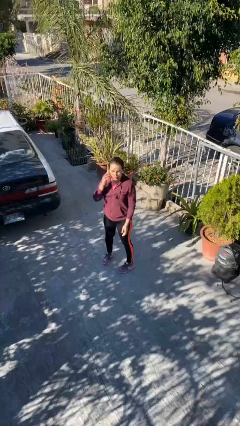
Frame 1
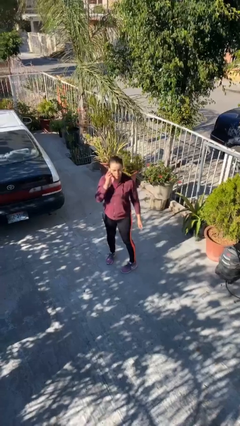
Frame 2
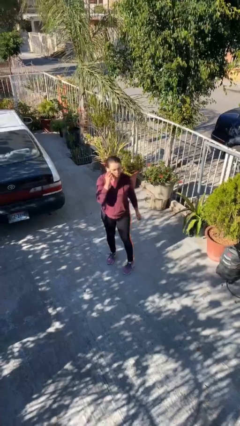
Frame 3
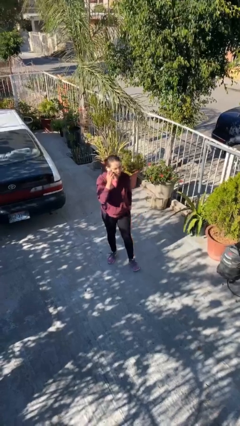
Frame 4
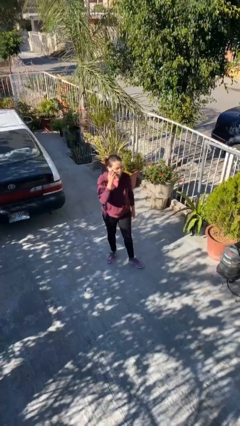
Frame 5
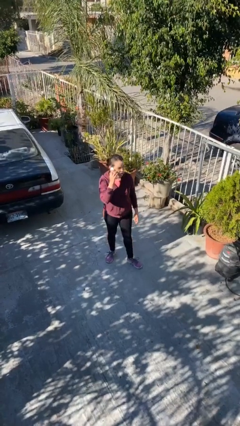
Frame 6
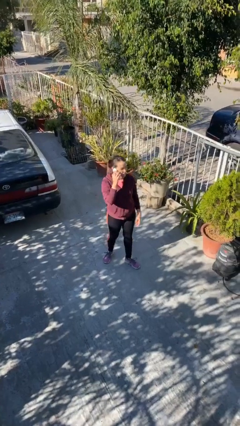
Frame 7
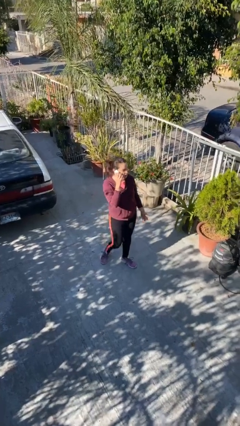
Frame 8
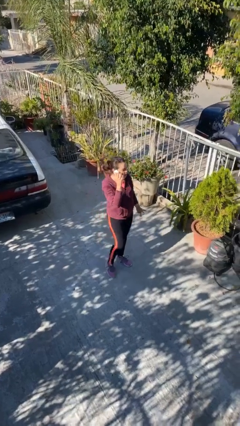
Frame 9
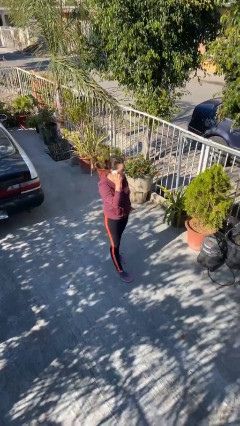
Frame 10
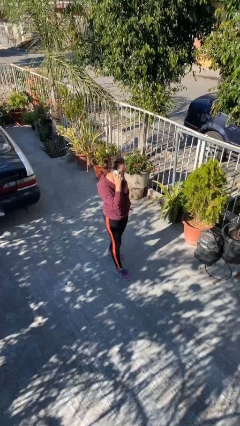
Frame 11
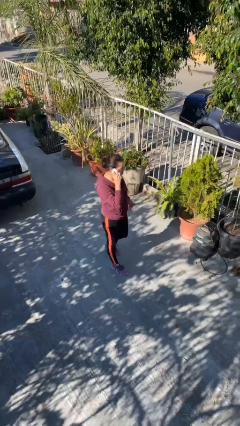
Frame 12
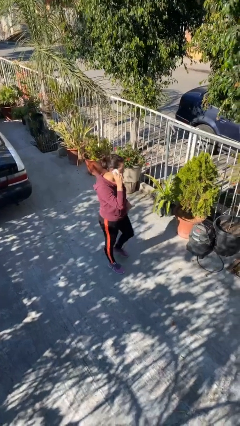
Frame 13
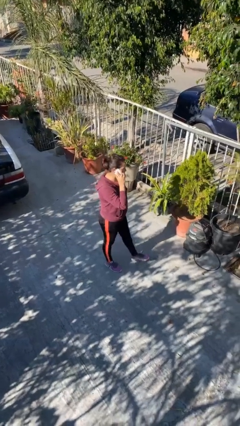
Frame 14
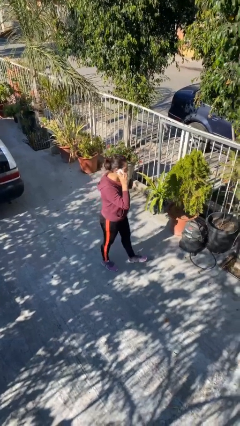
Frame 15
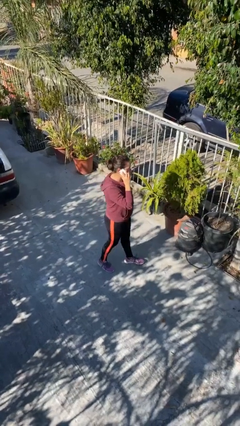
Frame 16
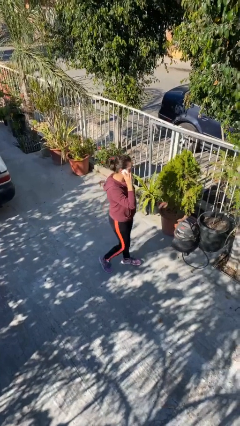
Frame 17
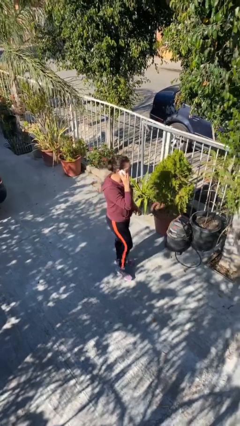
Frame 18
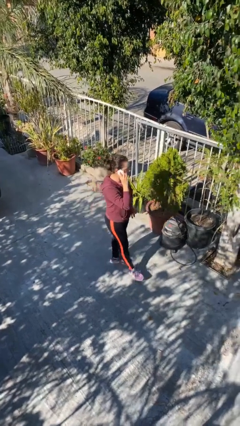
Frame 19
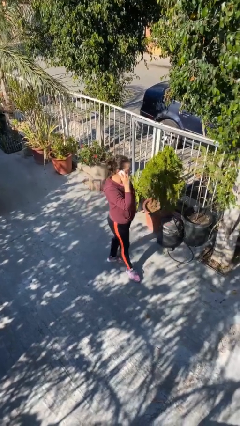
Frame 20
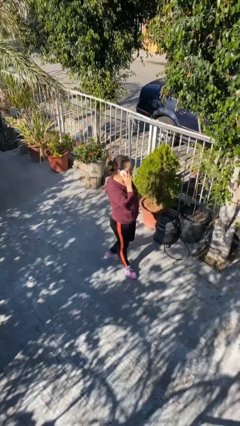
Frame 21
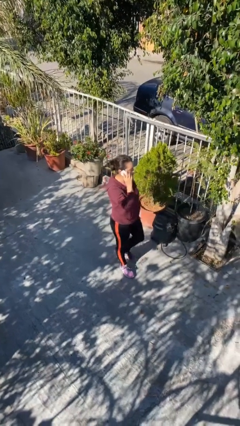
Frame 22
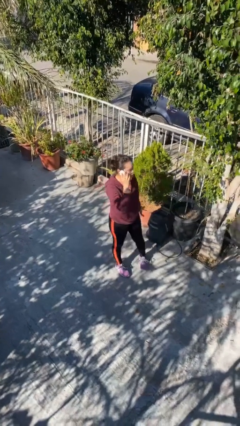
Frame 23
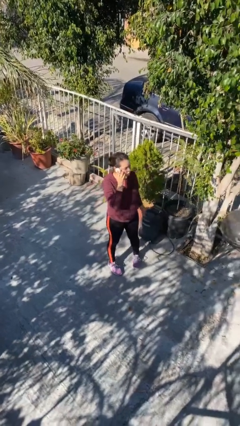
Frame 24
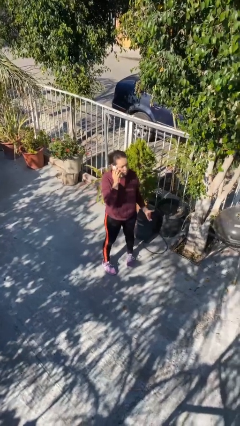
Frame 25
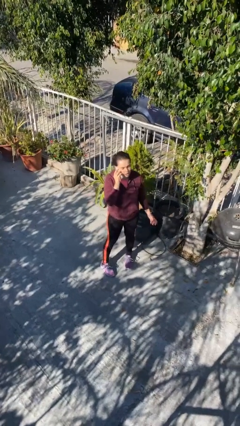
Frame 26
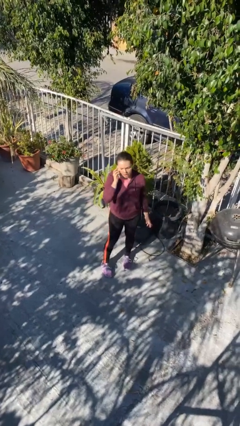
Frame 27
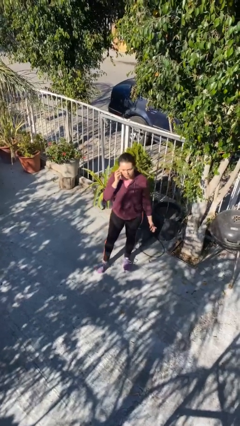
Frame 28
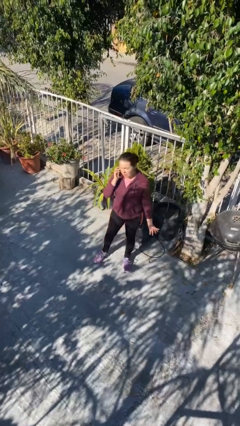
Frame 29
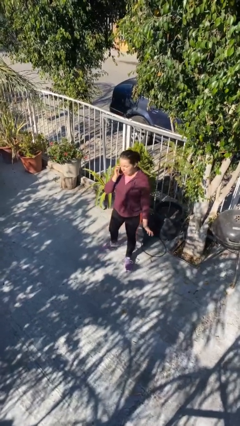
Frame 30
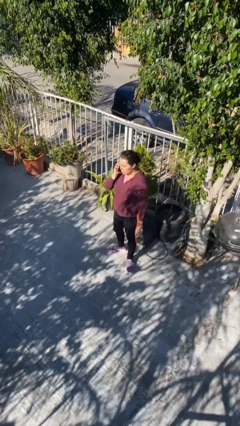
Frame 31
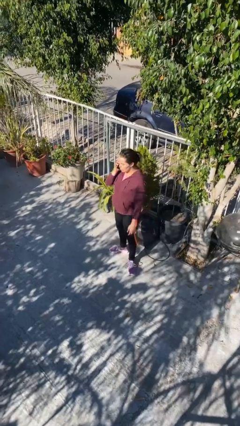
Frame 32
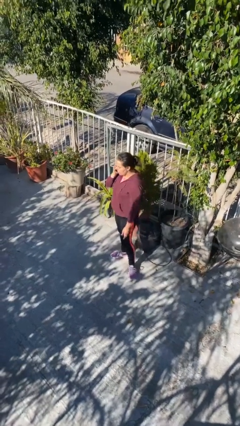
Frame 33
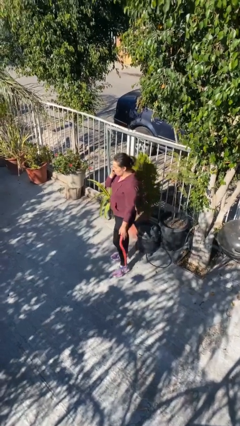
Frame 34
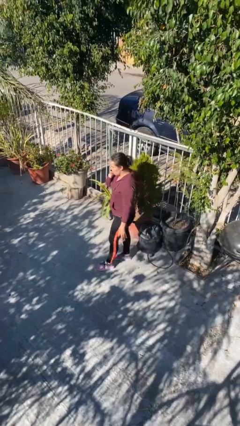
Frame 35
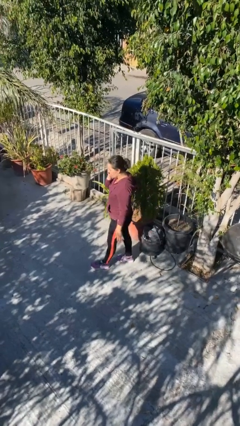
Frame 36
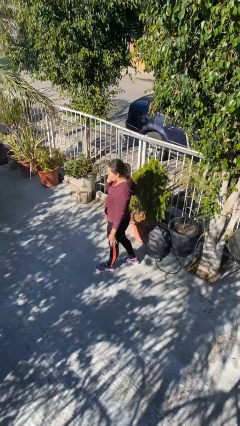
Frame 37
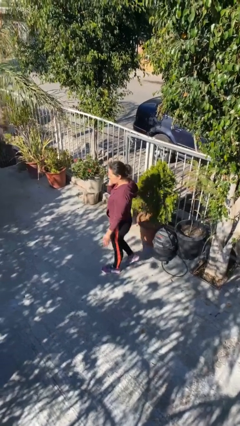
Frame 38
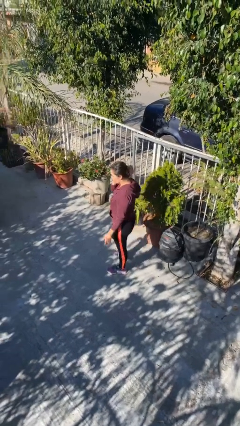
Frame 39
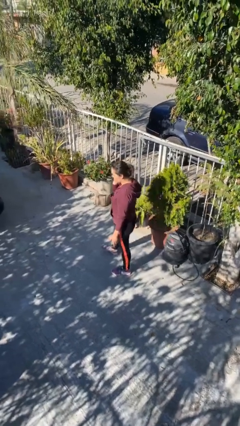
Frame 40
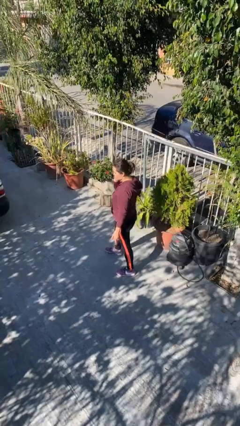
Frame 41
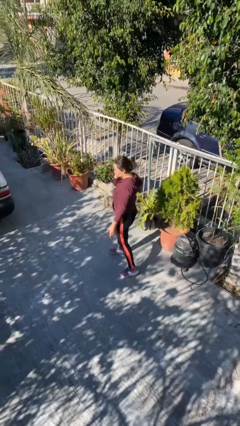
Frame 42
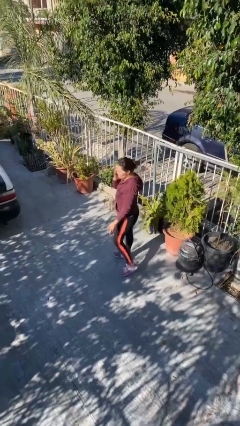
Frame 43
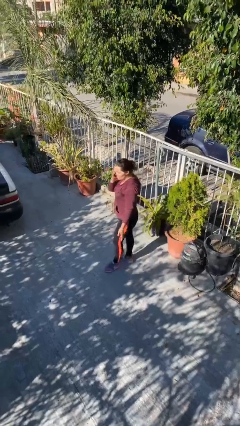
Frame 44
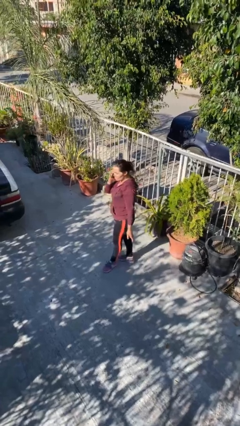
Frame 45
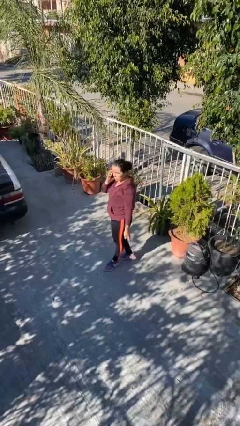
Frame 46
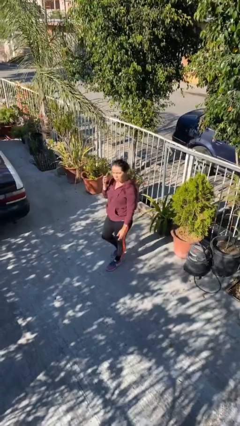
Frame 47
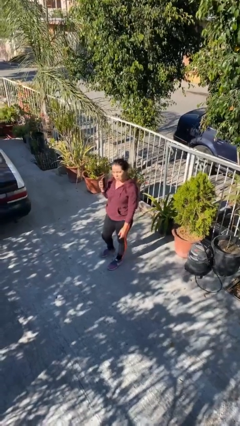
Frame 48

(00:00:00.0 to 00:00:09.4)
person talks on phone

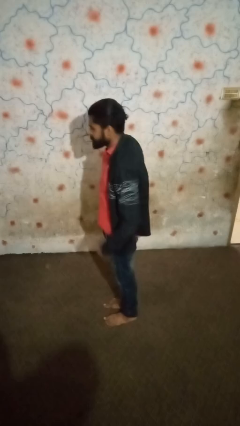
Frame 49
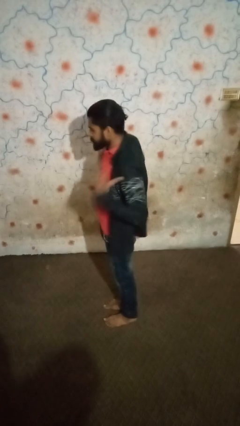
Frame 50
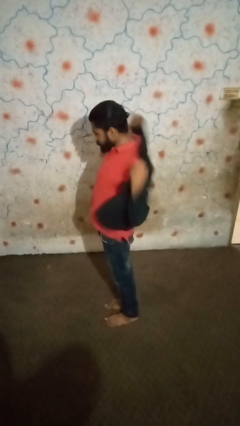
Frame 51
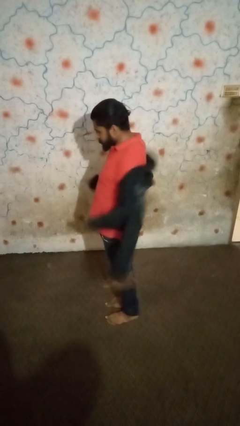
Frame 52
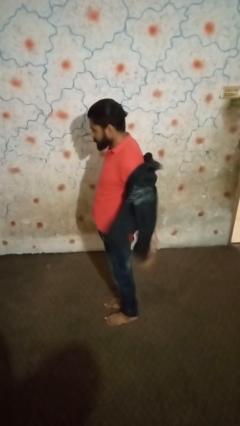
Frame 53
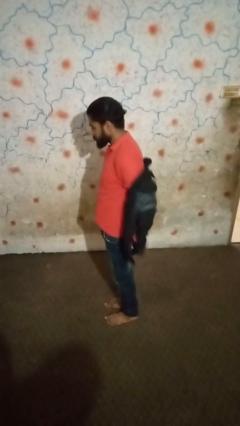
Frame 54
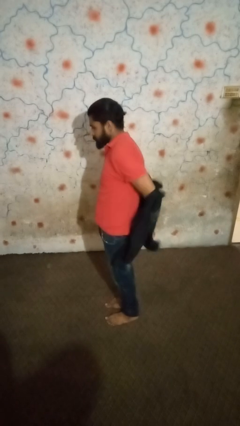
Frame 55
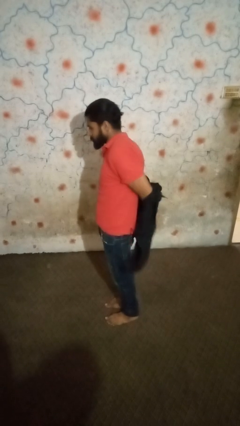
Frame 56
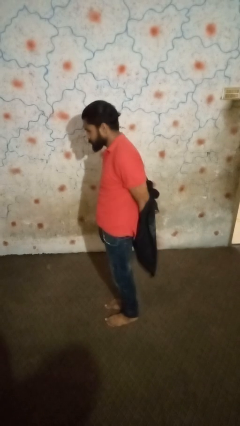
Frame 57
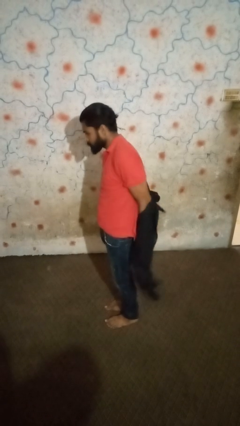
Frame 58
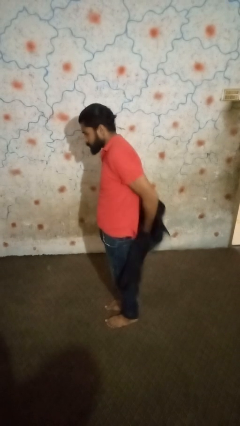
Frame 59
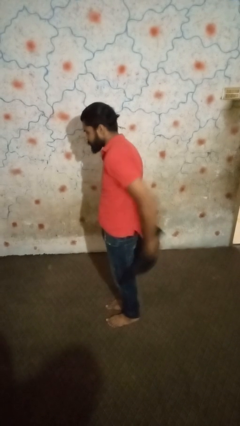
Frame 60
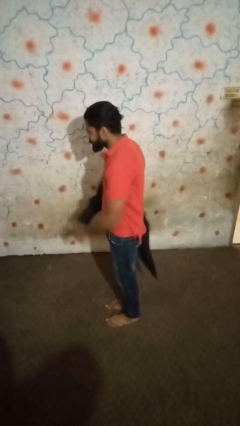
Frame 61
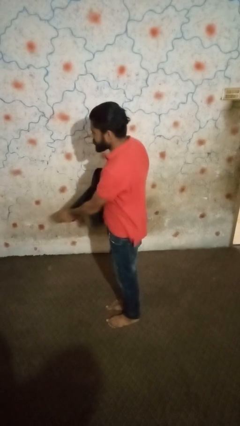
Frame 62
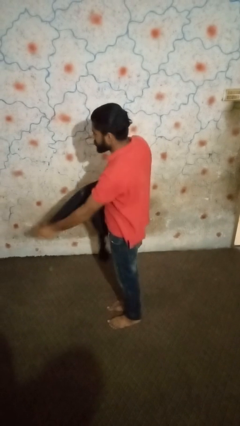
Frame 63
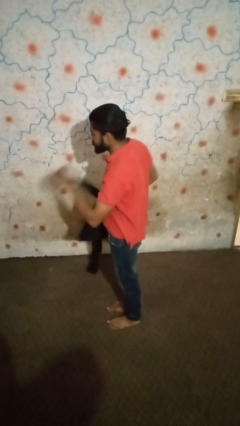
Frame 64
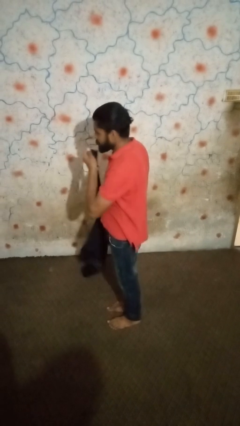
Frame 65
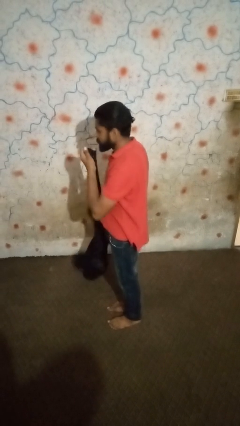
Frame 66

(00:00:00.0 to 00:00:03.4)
person takes off shirt

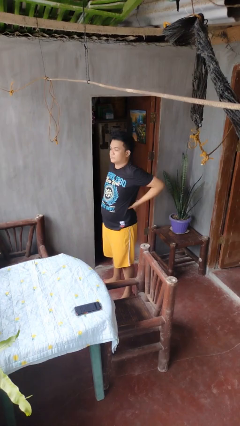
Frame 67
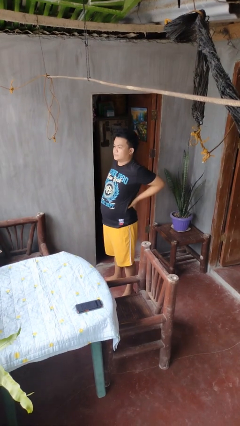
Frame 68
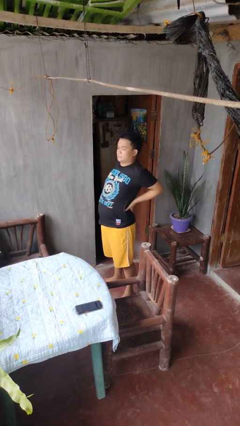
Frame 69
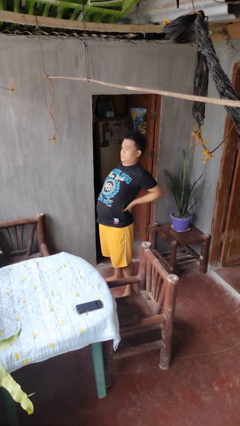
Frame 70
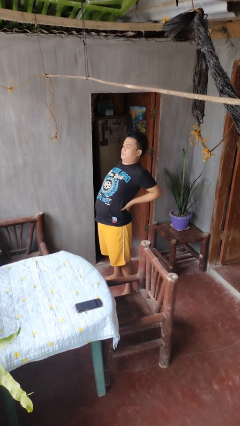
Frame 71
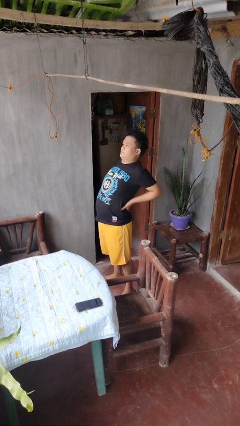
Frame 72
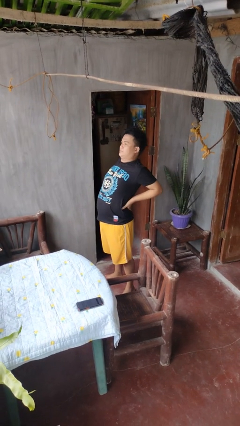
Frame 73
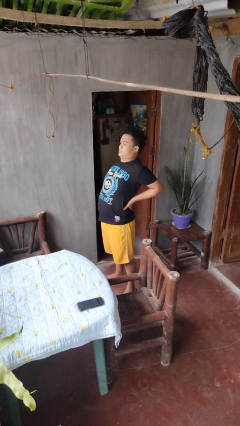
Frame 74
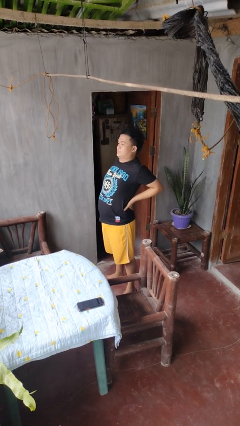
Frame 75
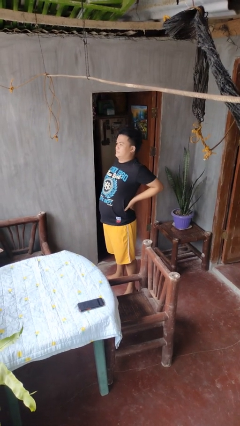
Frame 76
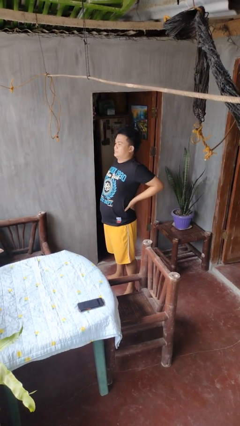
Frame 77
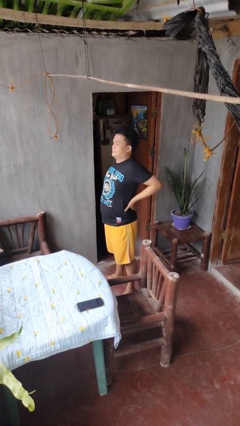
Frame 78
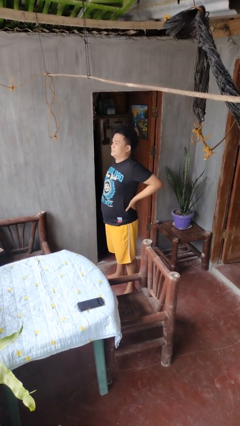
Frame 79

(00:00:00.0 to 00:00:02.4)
person stretches back

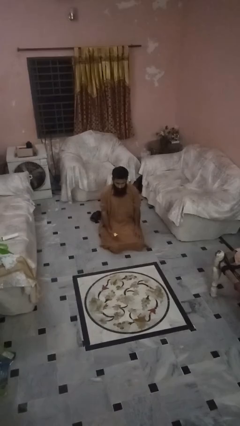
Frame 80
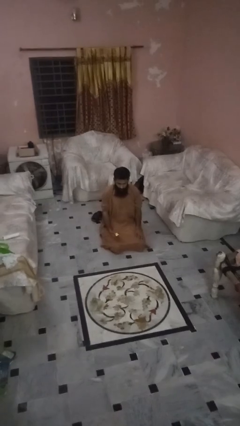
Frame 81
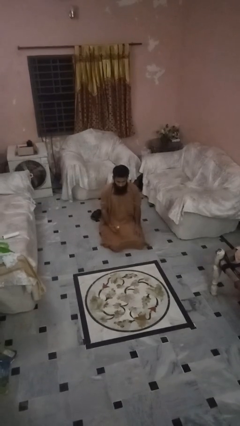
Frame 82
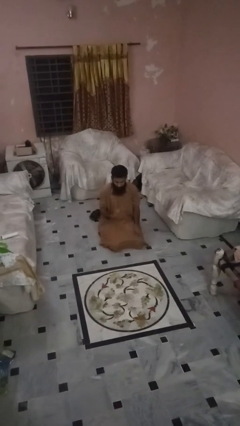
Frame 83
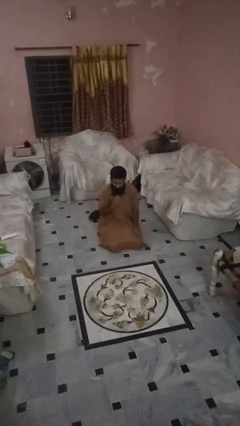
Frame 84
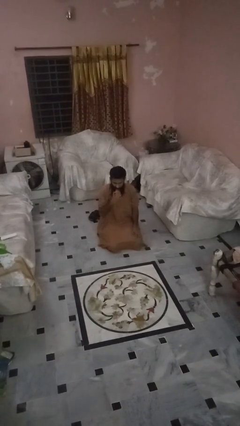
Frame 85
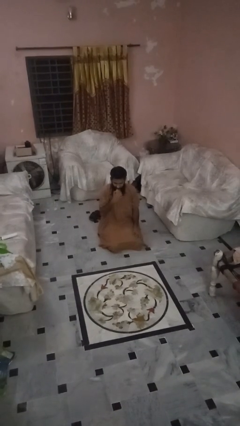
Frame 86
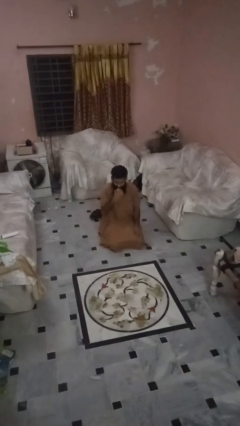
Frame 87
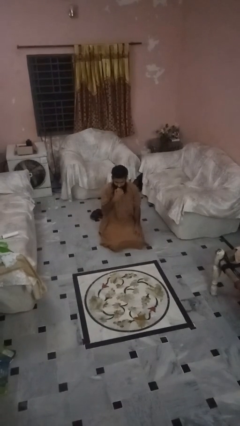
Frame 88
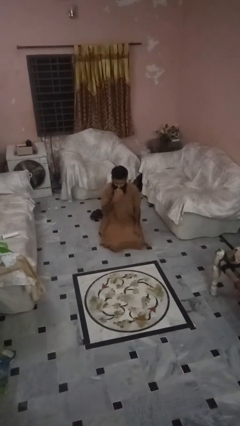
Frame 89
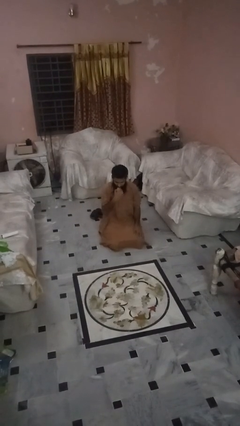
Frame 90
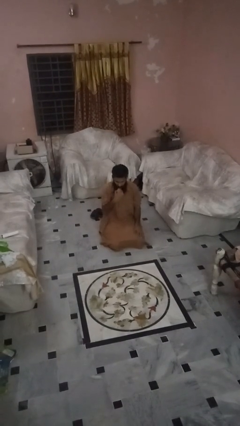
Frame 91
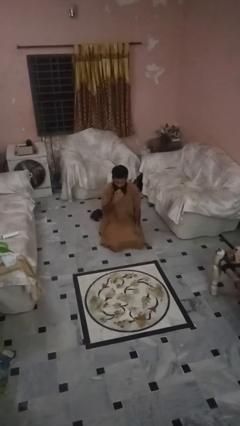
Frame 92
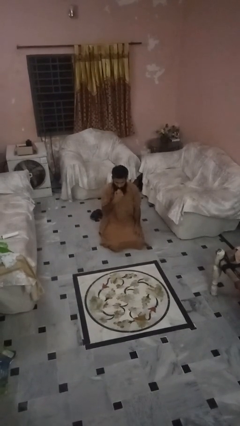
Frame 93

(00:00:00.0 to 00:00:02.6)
person eats apple
